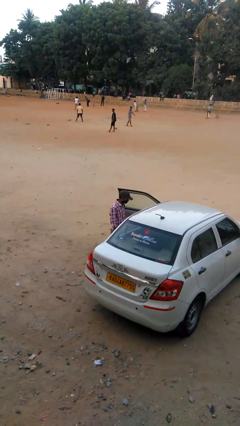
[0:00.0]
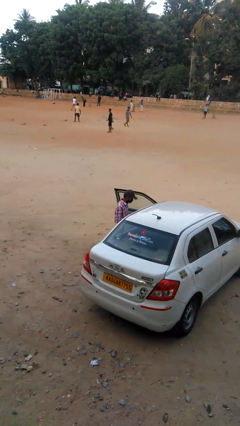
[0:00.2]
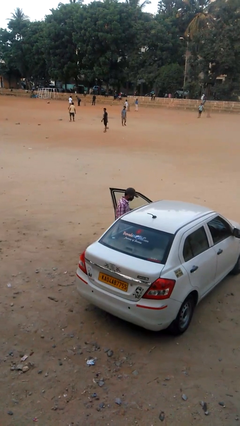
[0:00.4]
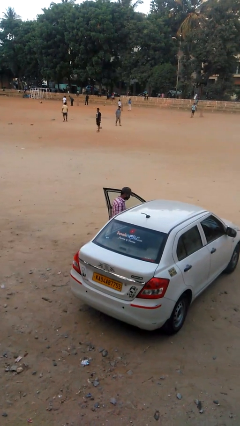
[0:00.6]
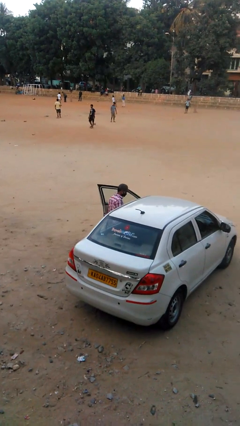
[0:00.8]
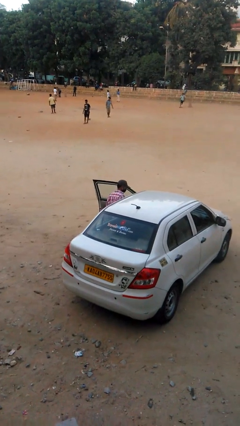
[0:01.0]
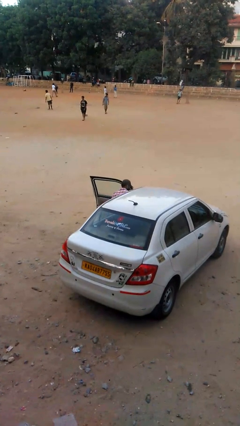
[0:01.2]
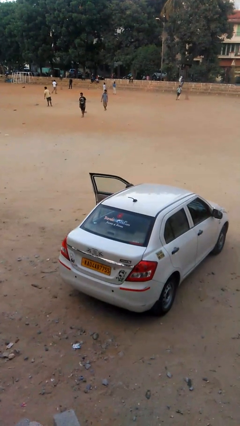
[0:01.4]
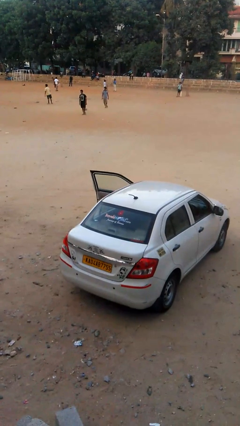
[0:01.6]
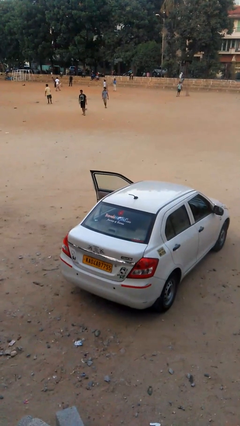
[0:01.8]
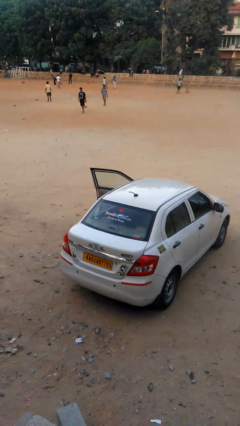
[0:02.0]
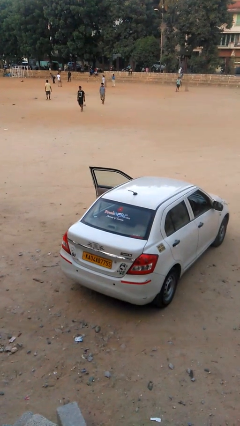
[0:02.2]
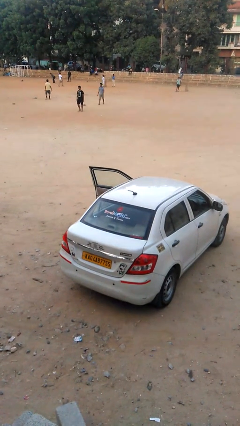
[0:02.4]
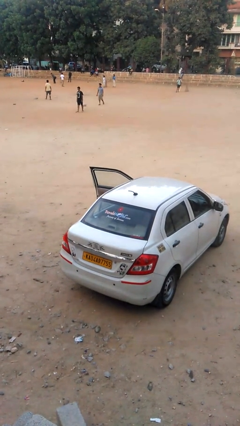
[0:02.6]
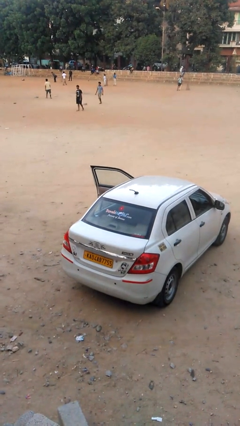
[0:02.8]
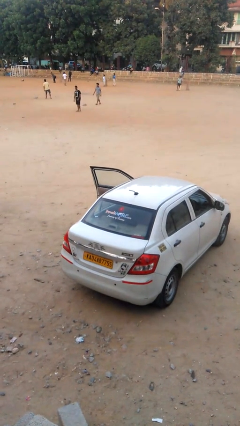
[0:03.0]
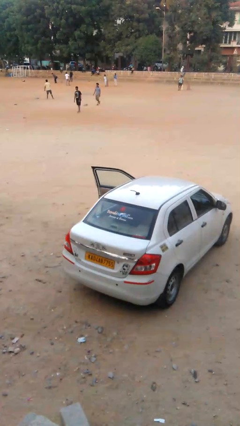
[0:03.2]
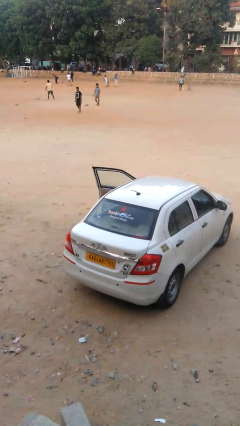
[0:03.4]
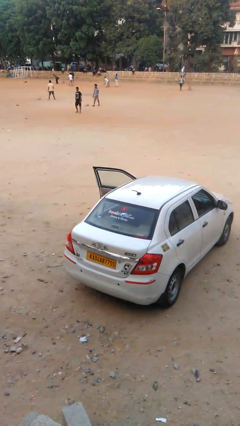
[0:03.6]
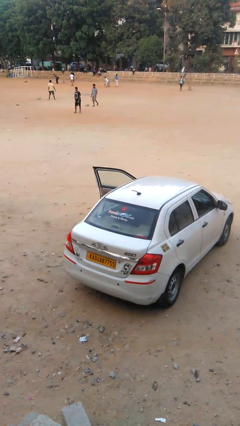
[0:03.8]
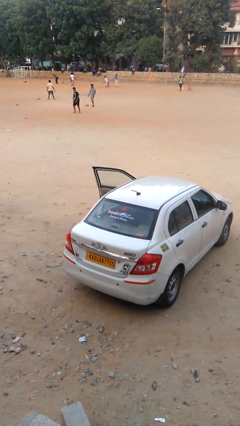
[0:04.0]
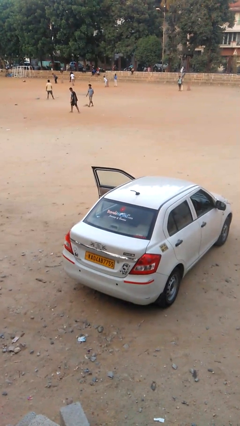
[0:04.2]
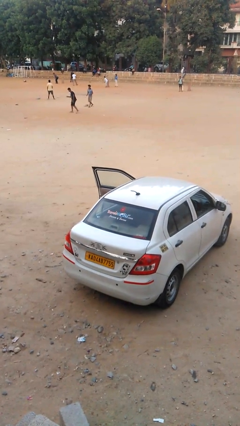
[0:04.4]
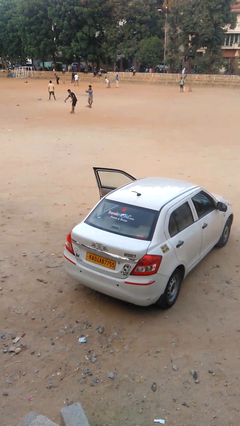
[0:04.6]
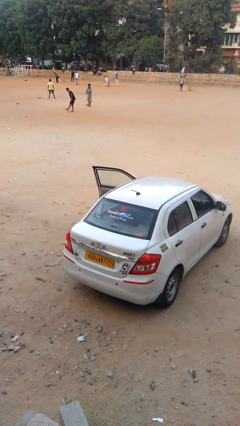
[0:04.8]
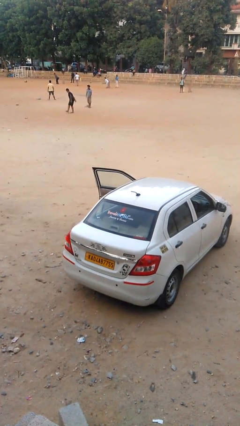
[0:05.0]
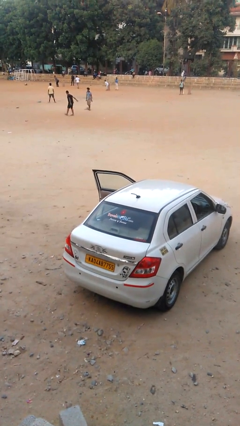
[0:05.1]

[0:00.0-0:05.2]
person enters car

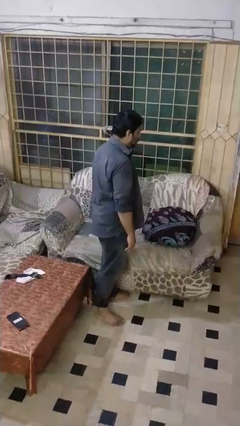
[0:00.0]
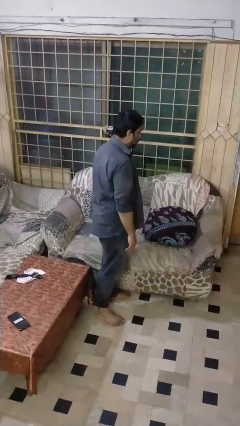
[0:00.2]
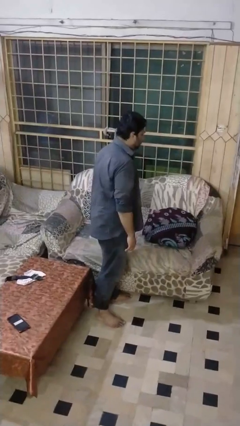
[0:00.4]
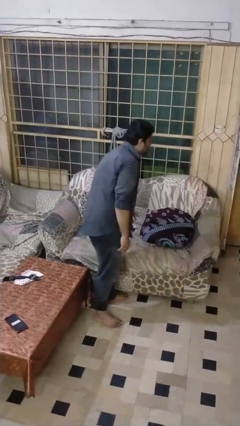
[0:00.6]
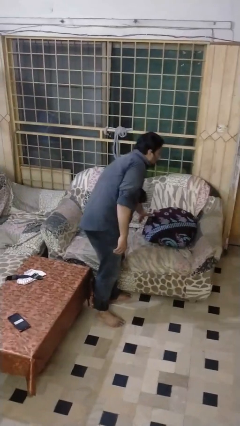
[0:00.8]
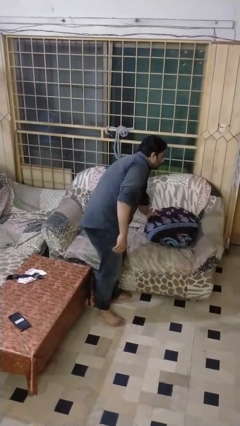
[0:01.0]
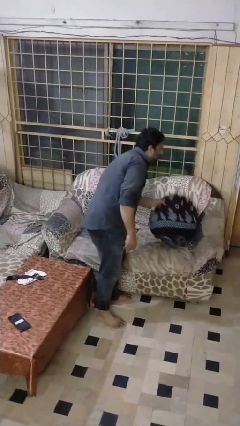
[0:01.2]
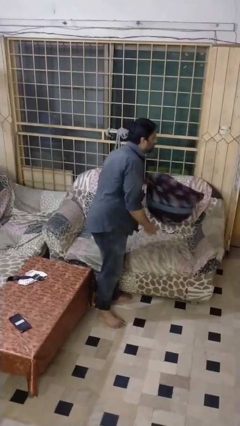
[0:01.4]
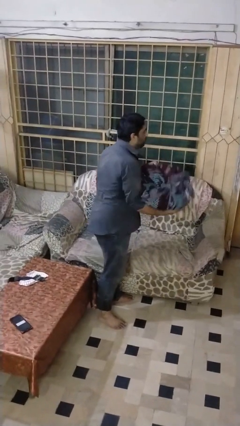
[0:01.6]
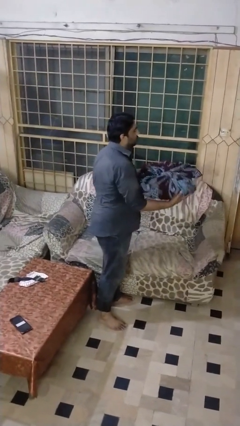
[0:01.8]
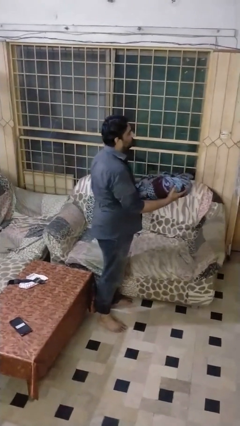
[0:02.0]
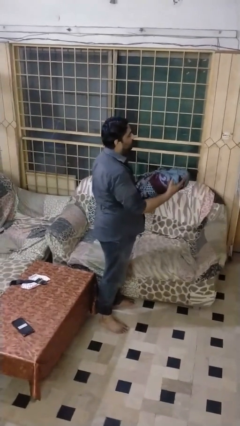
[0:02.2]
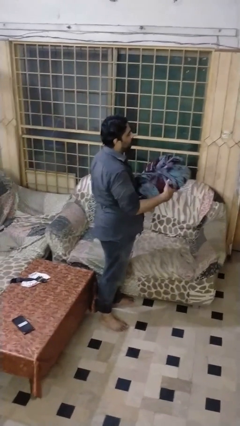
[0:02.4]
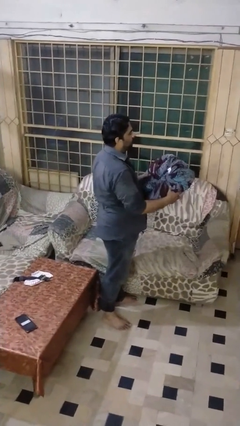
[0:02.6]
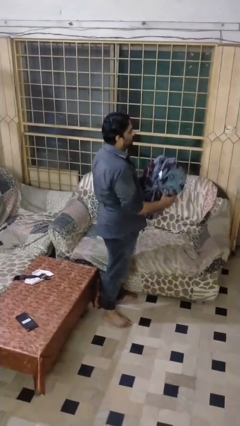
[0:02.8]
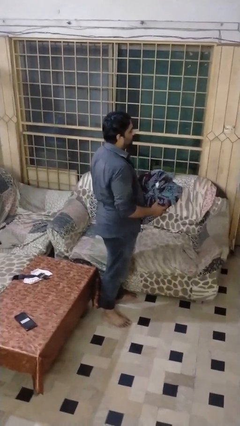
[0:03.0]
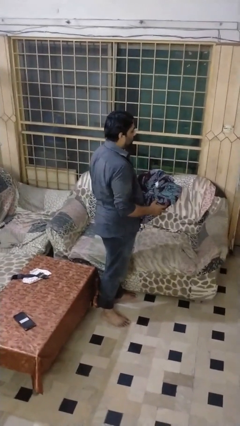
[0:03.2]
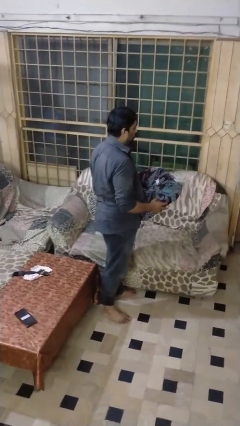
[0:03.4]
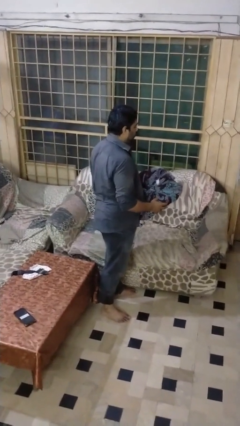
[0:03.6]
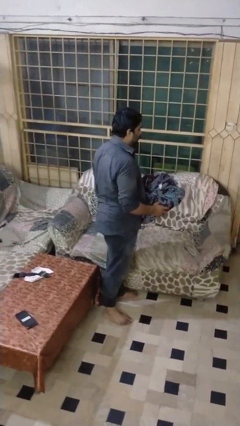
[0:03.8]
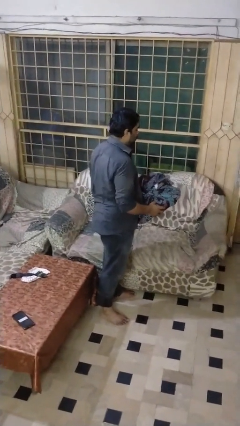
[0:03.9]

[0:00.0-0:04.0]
person picks up object from couch

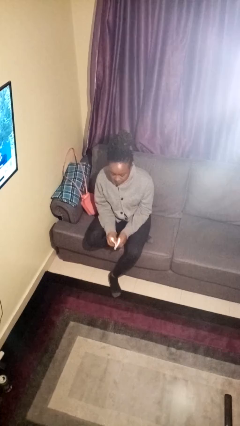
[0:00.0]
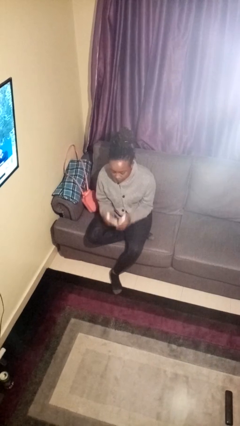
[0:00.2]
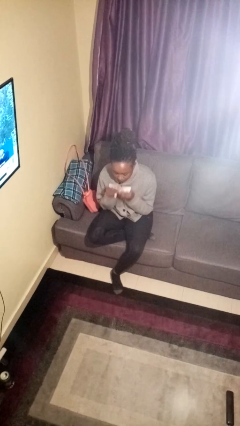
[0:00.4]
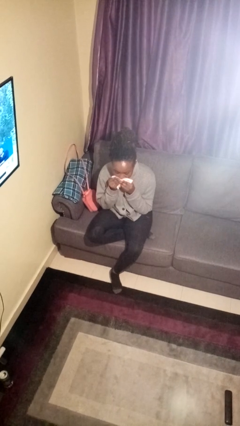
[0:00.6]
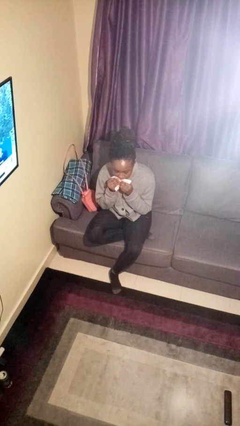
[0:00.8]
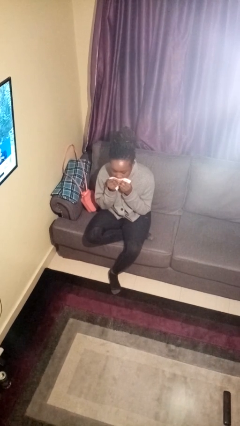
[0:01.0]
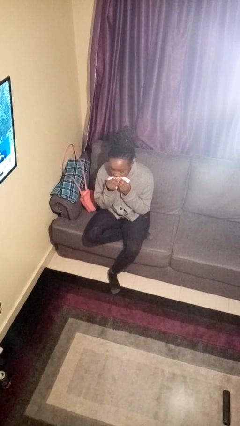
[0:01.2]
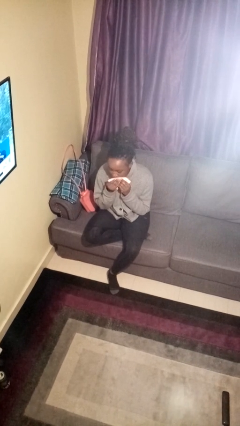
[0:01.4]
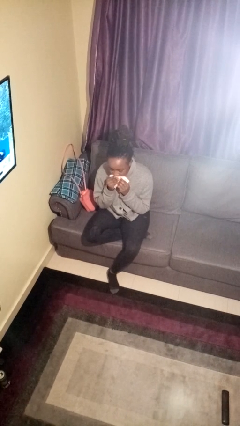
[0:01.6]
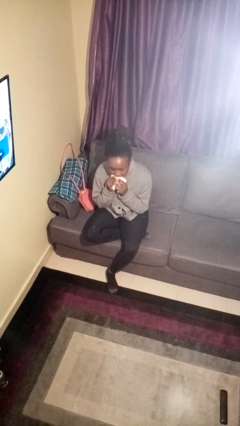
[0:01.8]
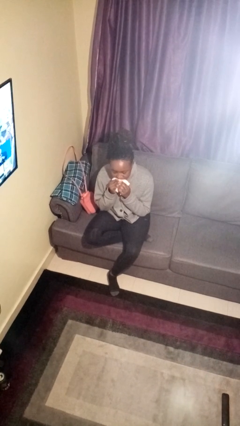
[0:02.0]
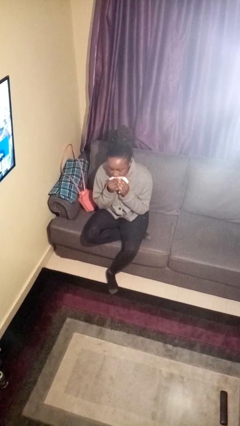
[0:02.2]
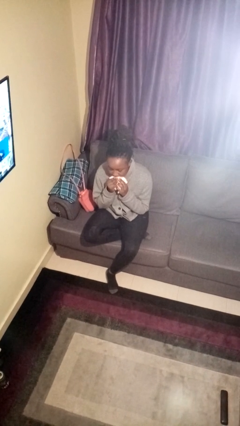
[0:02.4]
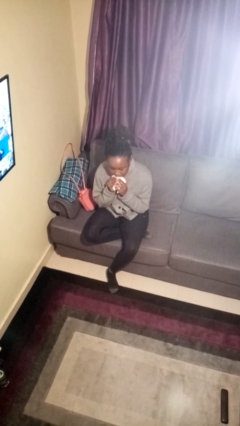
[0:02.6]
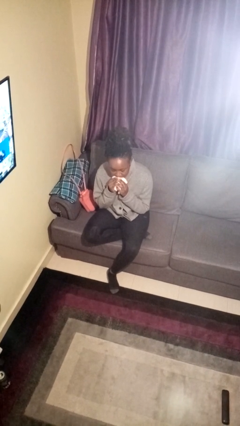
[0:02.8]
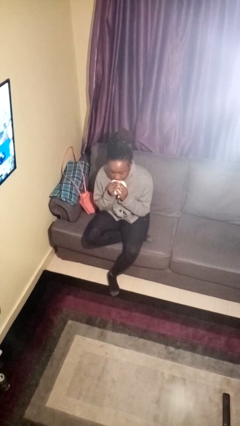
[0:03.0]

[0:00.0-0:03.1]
person wipes mouth with napkin

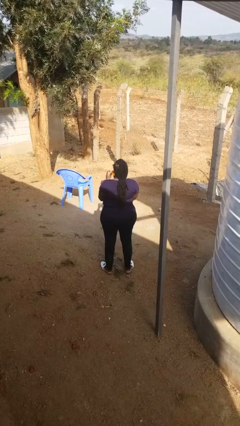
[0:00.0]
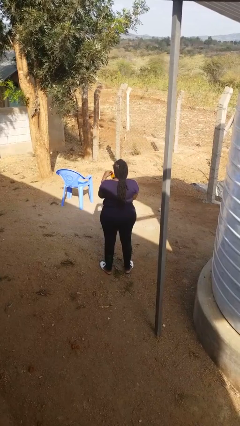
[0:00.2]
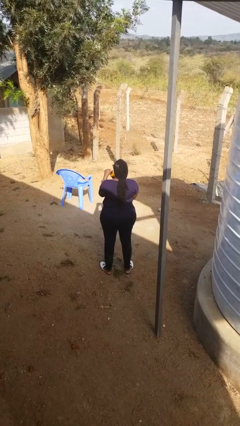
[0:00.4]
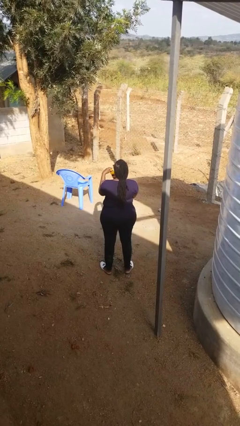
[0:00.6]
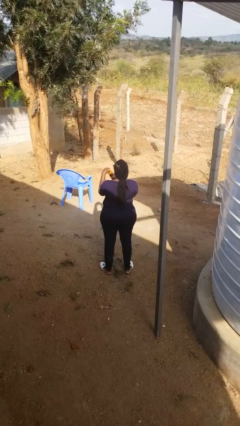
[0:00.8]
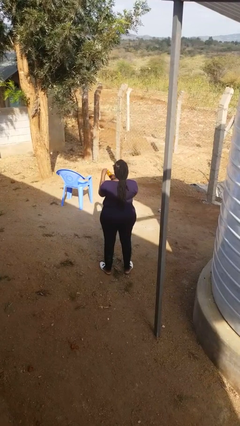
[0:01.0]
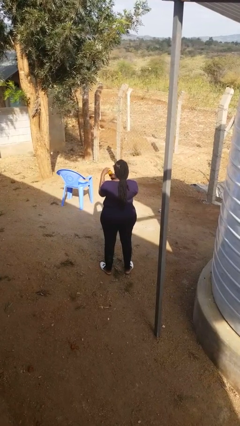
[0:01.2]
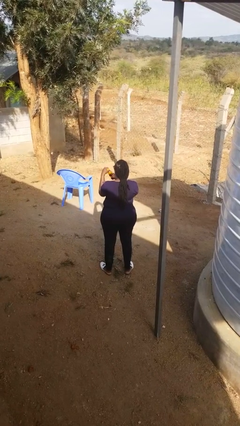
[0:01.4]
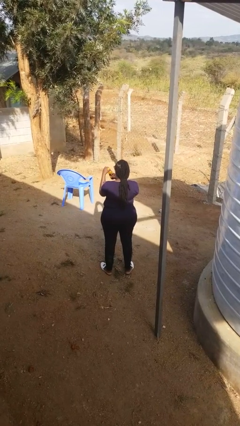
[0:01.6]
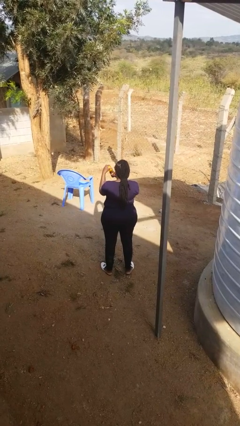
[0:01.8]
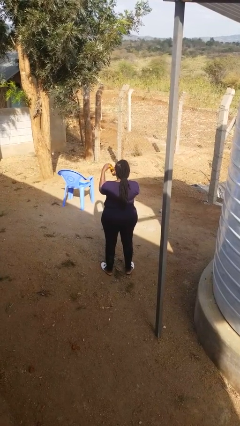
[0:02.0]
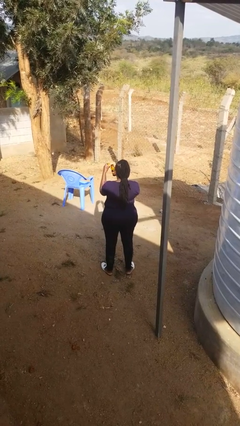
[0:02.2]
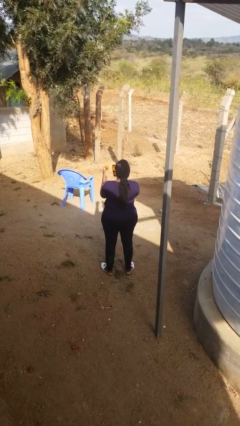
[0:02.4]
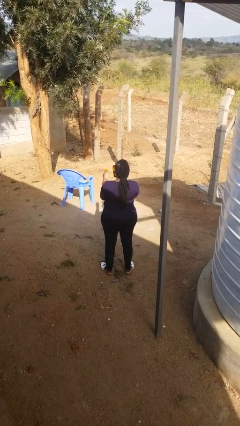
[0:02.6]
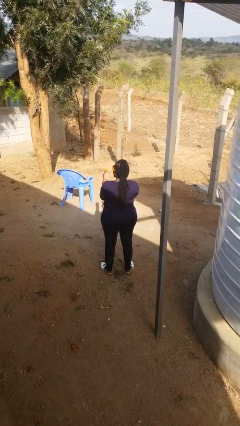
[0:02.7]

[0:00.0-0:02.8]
person opens jar

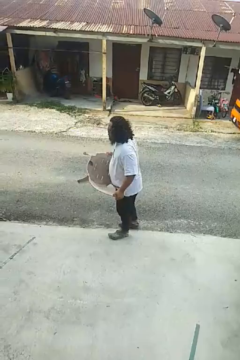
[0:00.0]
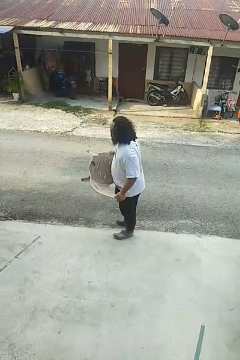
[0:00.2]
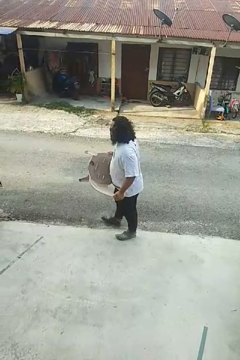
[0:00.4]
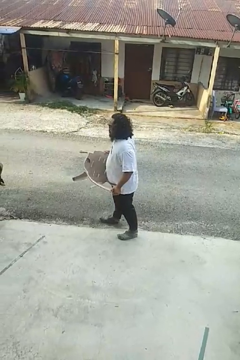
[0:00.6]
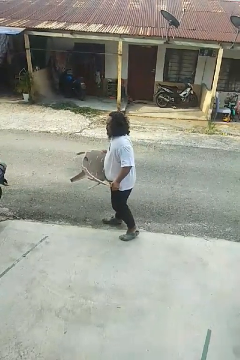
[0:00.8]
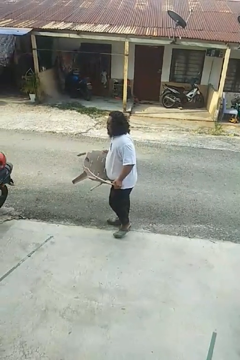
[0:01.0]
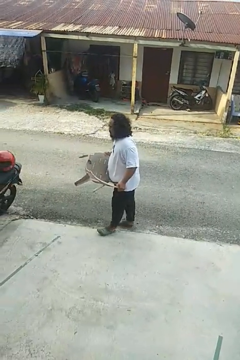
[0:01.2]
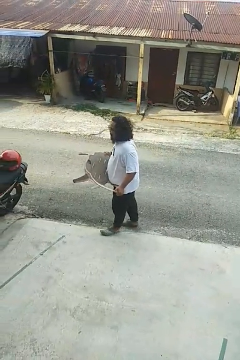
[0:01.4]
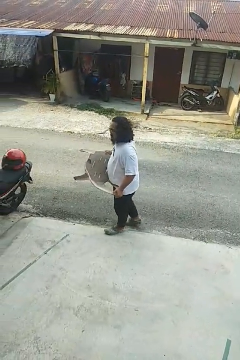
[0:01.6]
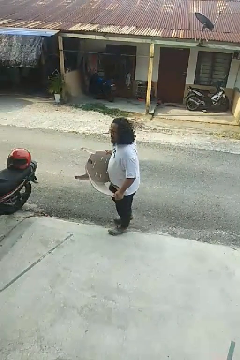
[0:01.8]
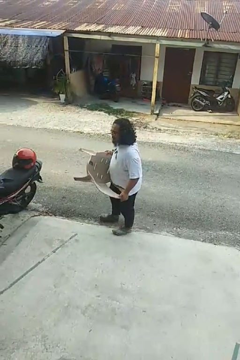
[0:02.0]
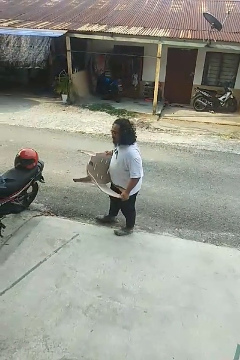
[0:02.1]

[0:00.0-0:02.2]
person carries furniture

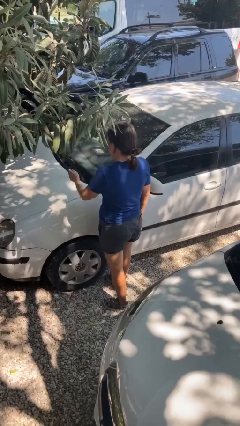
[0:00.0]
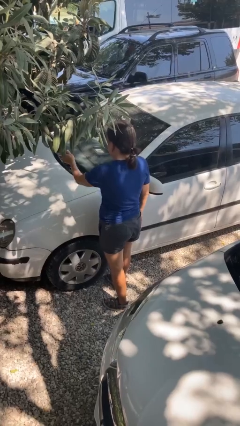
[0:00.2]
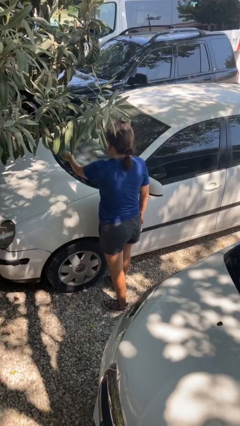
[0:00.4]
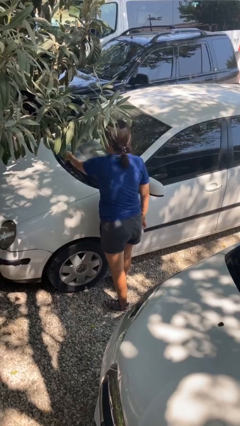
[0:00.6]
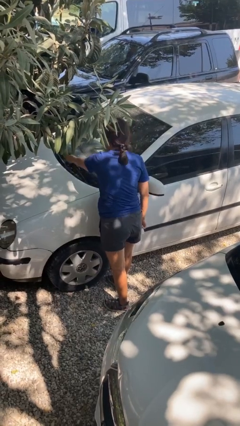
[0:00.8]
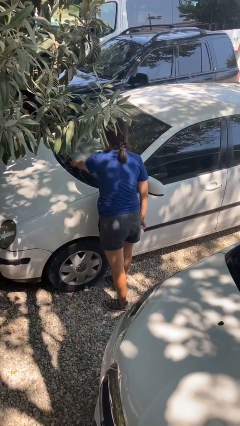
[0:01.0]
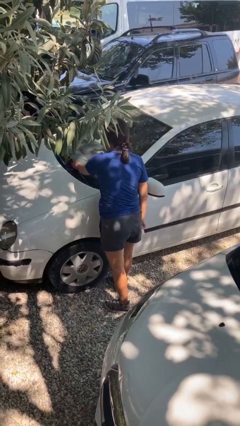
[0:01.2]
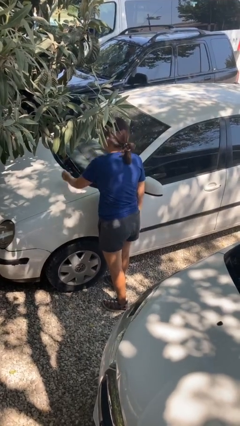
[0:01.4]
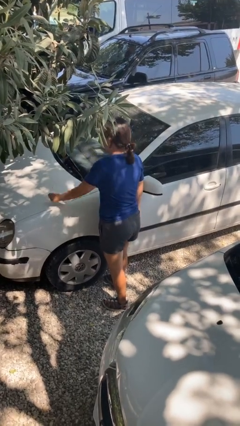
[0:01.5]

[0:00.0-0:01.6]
person flips down car wipers
